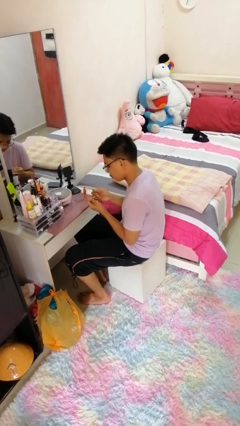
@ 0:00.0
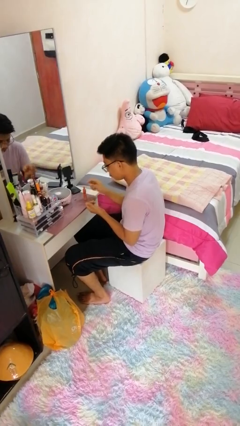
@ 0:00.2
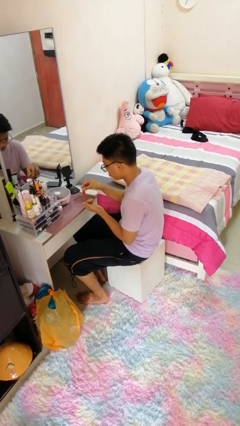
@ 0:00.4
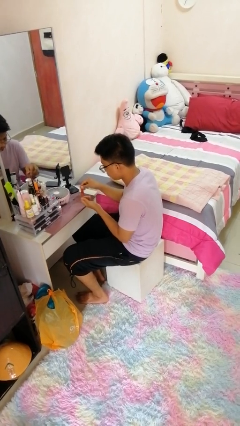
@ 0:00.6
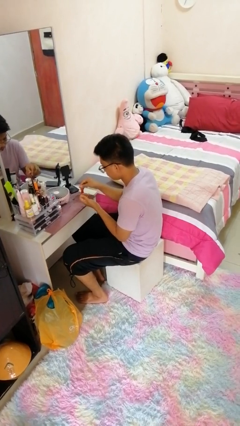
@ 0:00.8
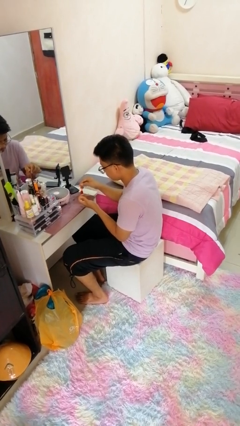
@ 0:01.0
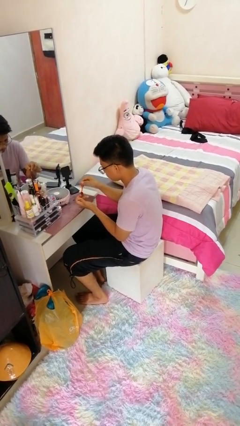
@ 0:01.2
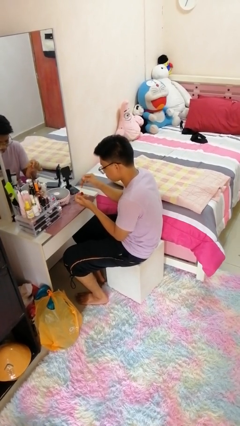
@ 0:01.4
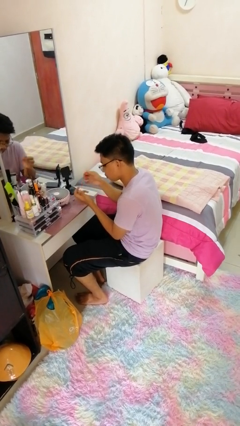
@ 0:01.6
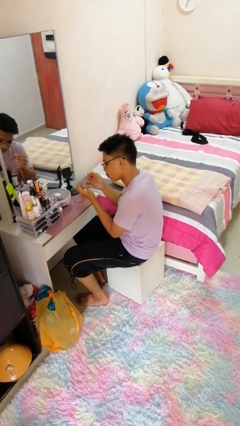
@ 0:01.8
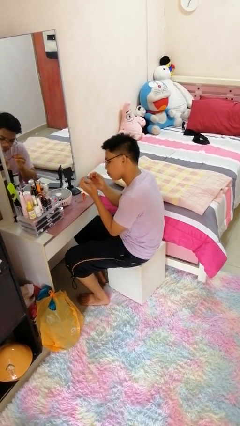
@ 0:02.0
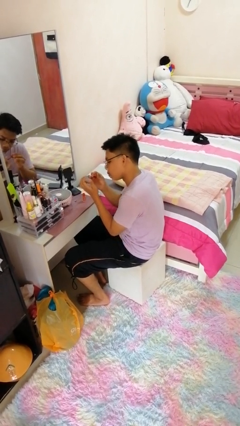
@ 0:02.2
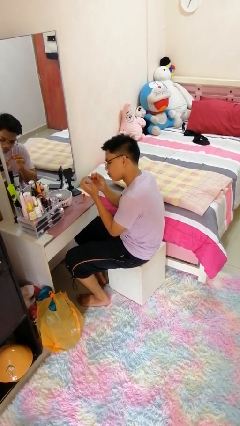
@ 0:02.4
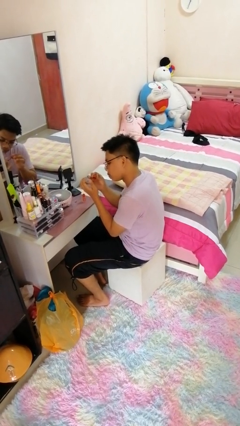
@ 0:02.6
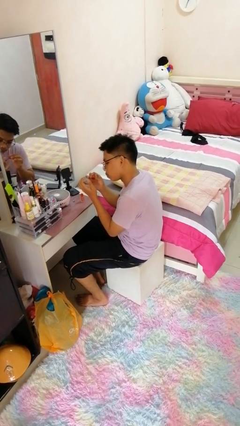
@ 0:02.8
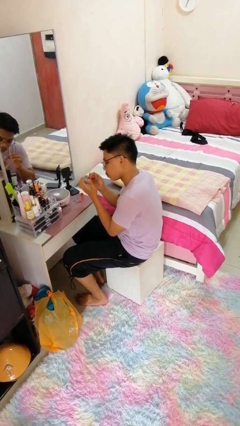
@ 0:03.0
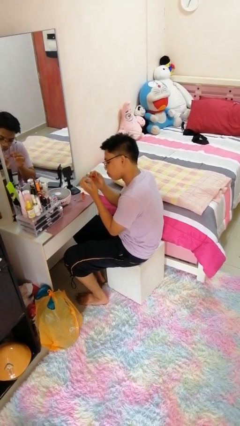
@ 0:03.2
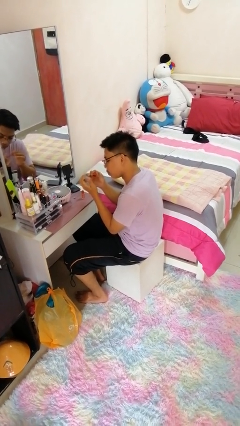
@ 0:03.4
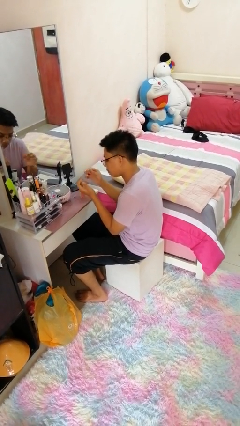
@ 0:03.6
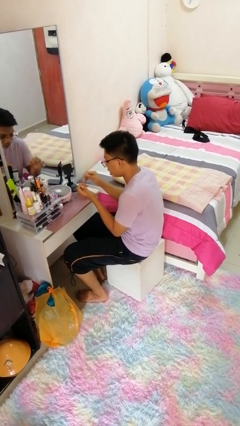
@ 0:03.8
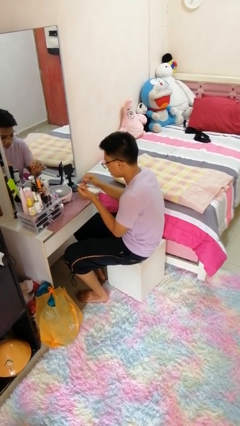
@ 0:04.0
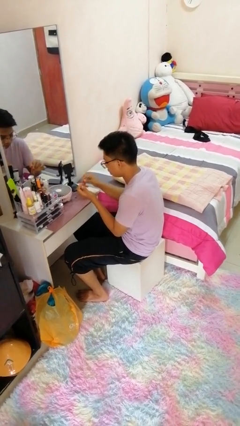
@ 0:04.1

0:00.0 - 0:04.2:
person paints fingernails

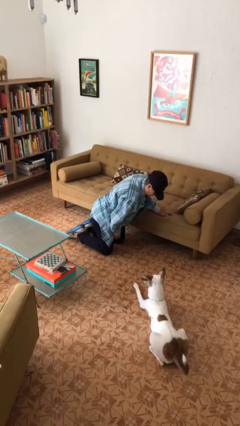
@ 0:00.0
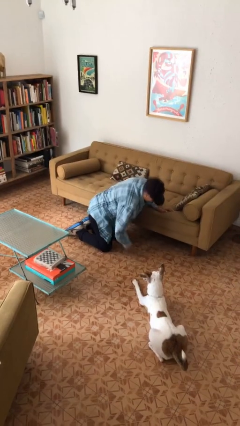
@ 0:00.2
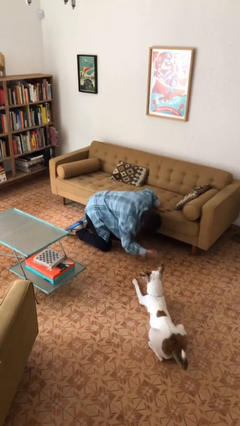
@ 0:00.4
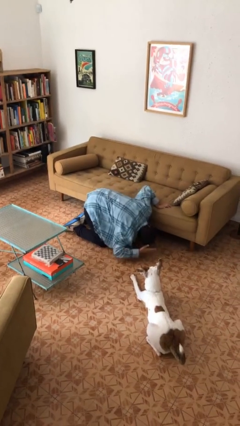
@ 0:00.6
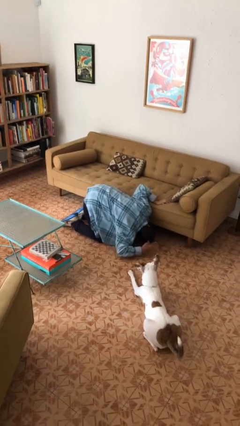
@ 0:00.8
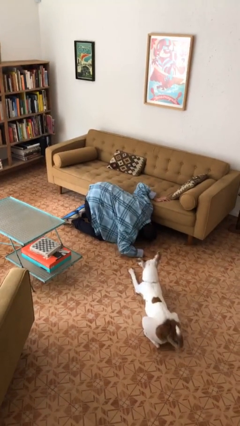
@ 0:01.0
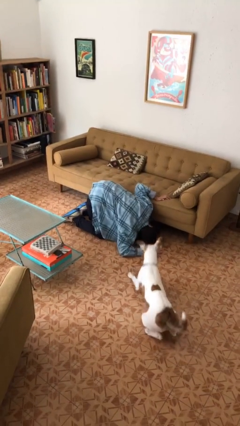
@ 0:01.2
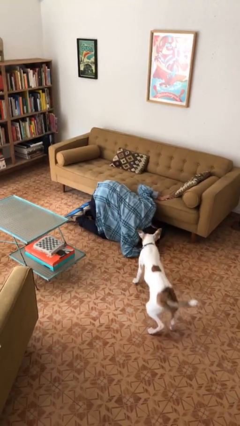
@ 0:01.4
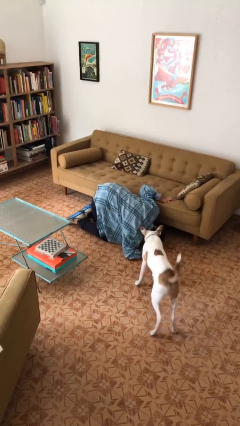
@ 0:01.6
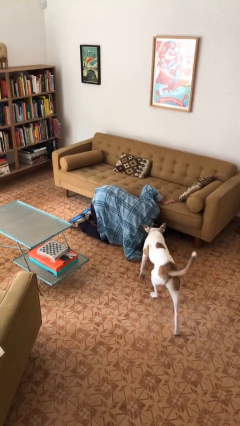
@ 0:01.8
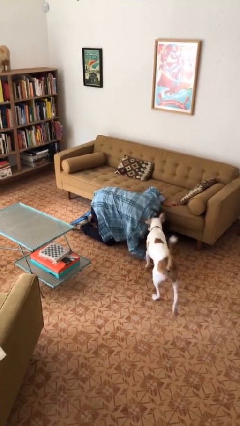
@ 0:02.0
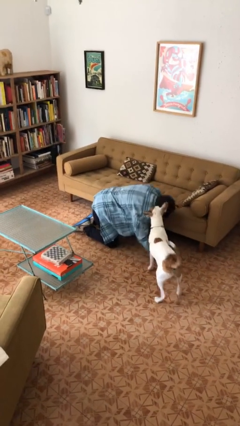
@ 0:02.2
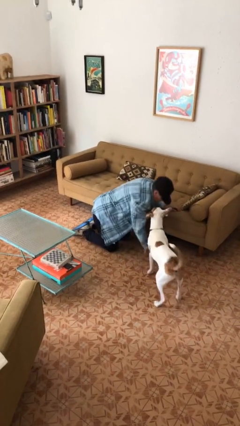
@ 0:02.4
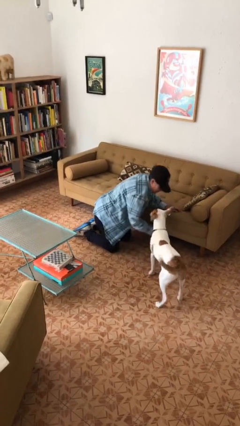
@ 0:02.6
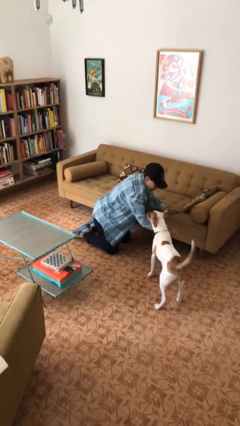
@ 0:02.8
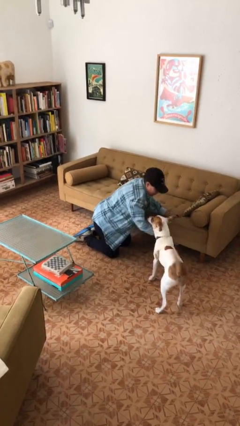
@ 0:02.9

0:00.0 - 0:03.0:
person searches under couch

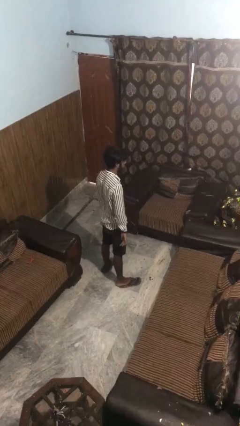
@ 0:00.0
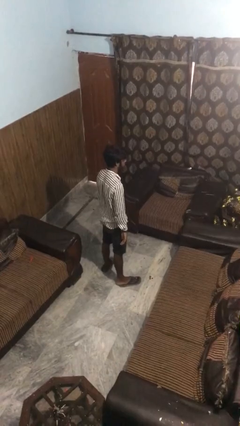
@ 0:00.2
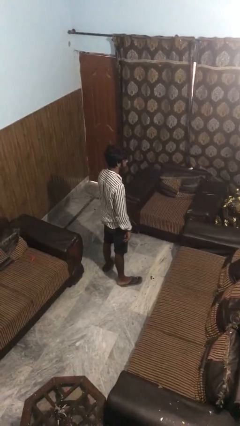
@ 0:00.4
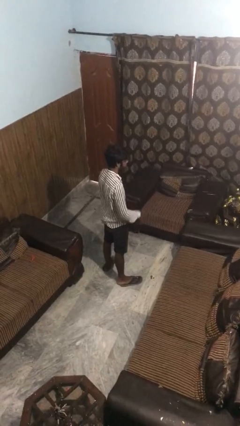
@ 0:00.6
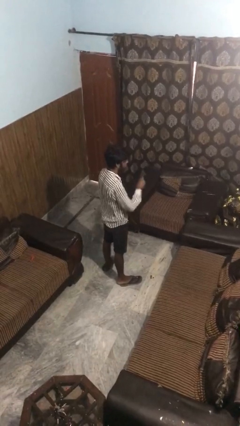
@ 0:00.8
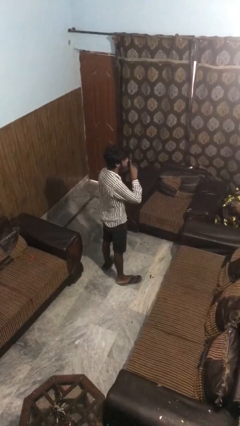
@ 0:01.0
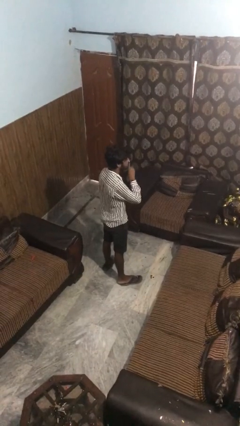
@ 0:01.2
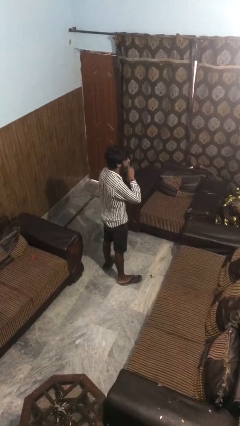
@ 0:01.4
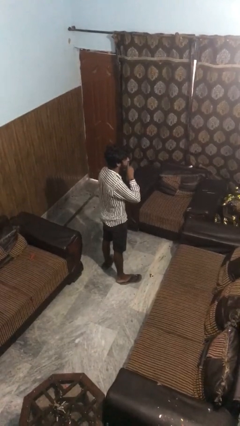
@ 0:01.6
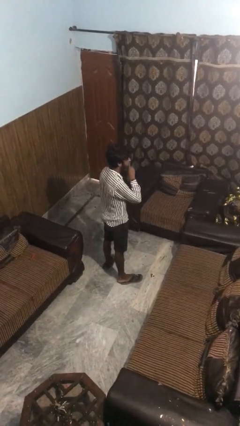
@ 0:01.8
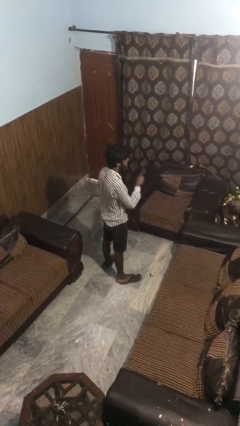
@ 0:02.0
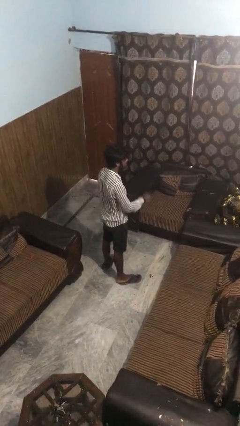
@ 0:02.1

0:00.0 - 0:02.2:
person gestures be quiet

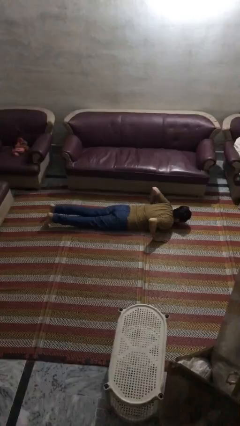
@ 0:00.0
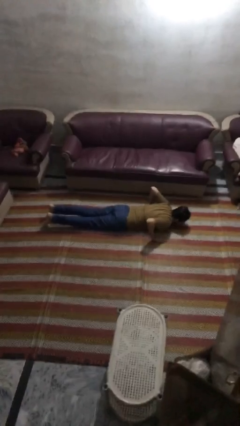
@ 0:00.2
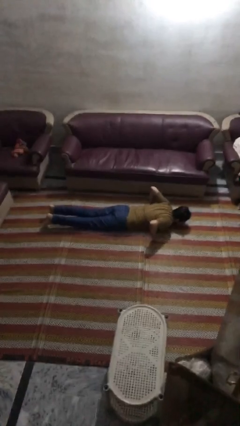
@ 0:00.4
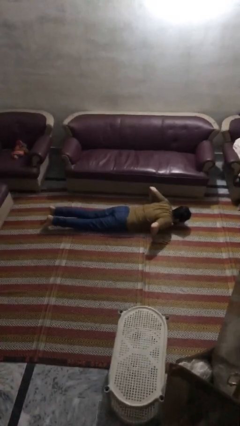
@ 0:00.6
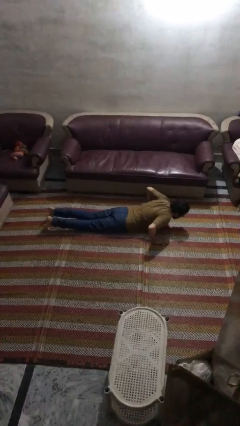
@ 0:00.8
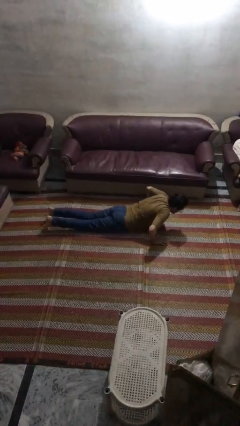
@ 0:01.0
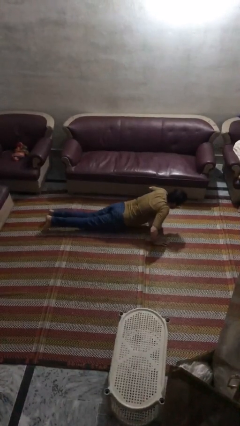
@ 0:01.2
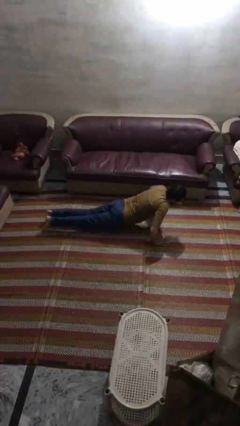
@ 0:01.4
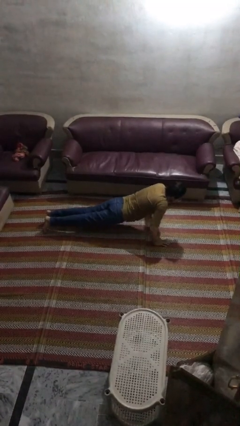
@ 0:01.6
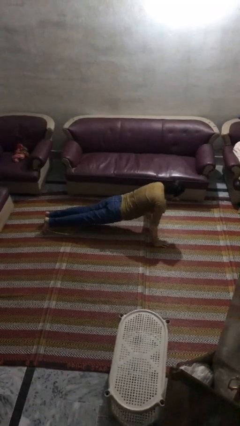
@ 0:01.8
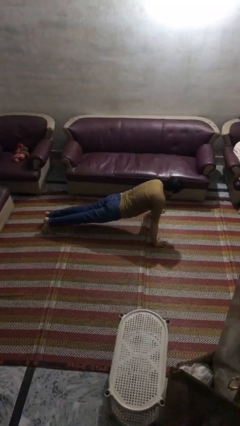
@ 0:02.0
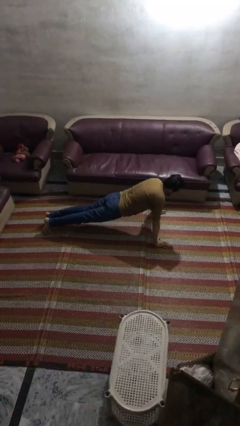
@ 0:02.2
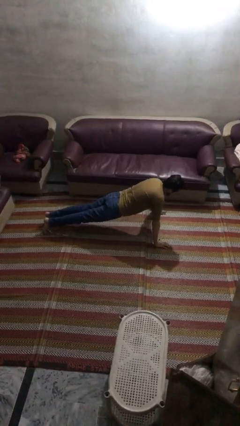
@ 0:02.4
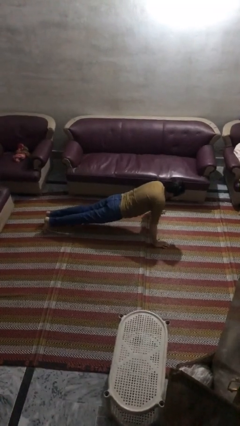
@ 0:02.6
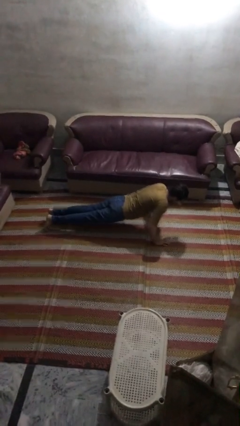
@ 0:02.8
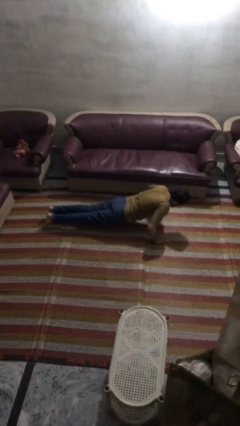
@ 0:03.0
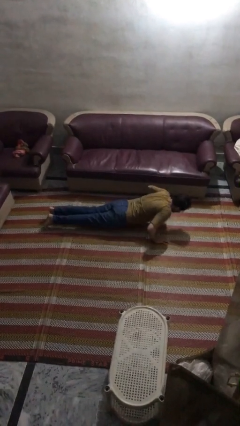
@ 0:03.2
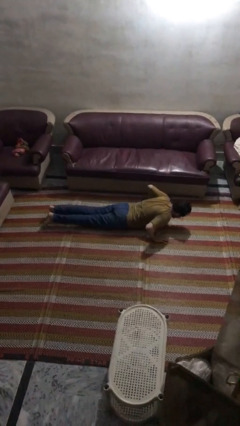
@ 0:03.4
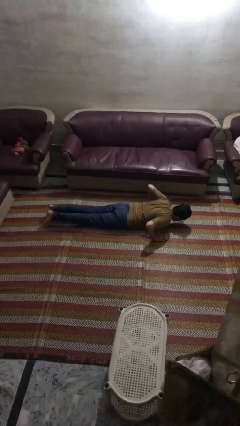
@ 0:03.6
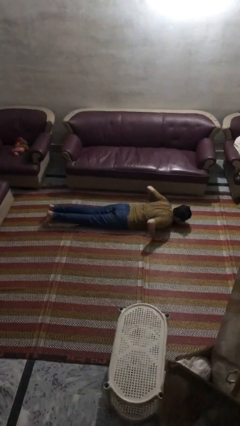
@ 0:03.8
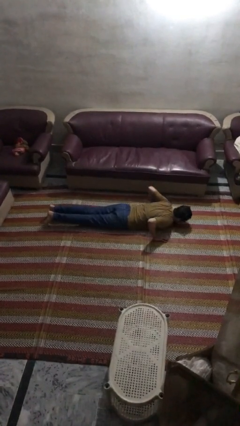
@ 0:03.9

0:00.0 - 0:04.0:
person exercises with pushup

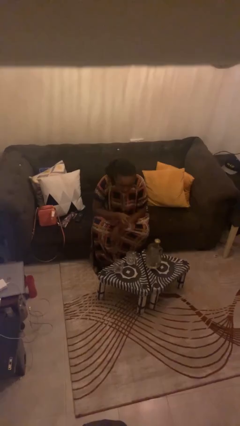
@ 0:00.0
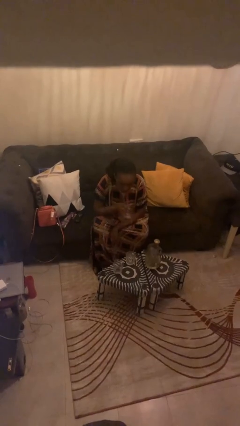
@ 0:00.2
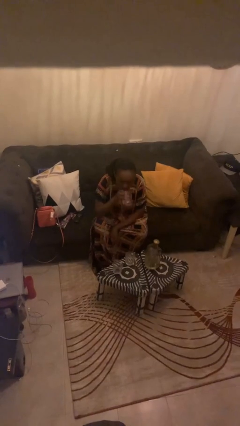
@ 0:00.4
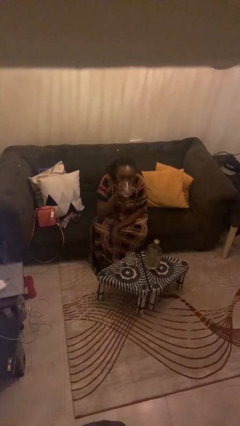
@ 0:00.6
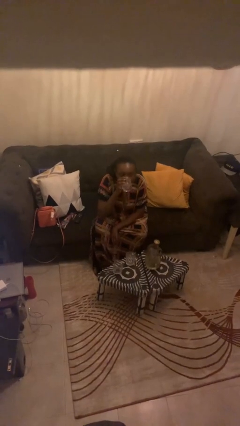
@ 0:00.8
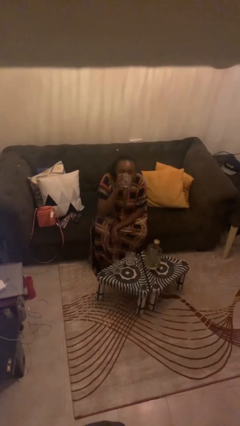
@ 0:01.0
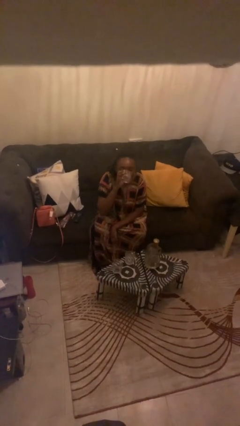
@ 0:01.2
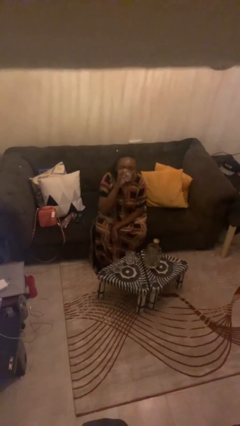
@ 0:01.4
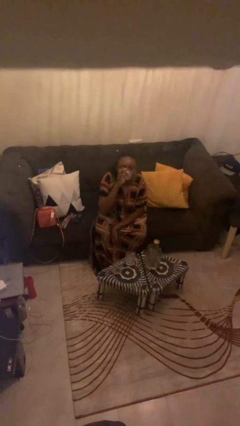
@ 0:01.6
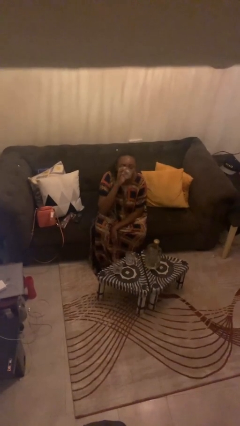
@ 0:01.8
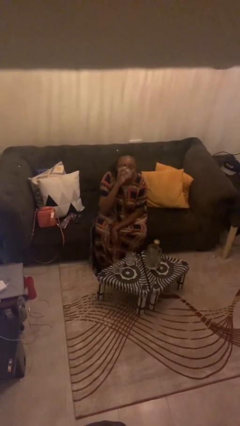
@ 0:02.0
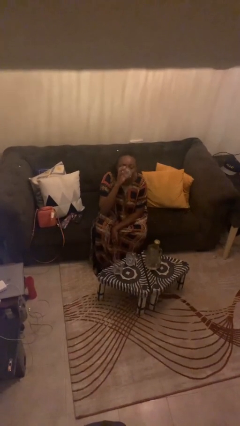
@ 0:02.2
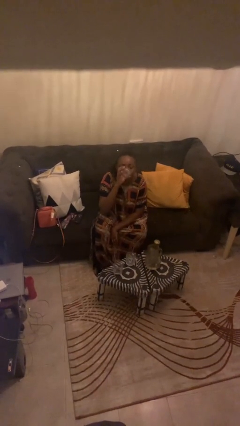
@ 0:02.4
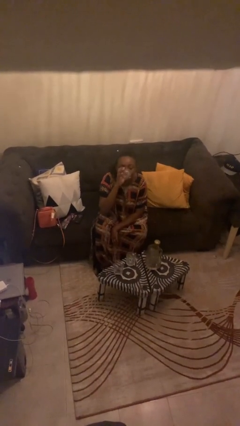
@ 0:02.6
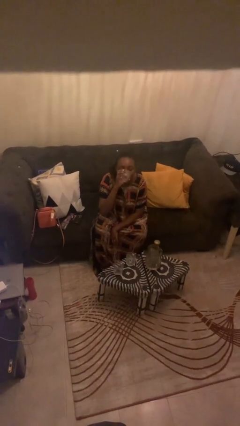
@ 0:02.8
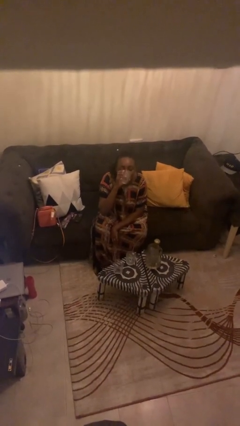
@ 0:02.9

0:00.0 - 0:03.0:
person drinks from shotglass

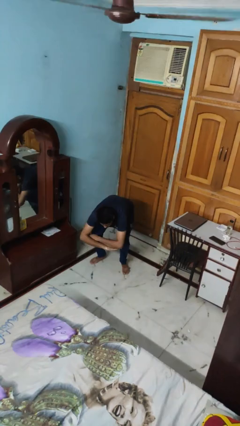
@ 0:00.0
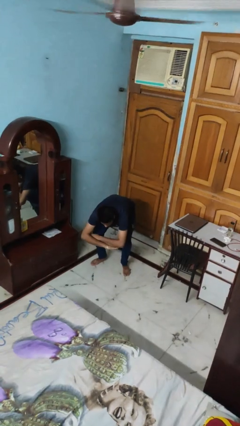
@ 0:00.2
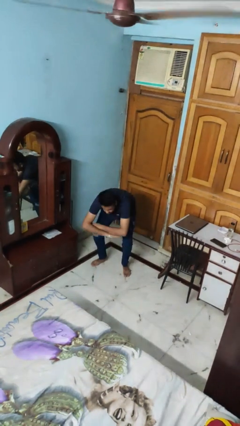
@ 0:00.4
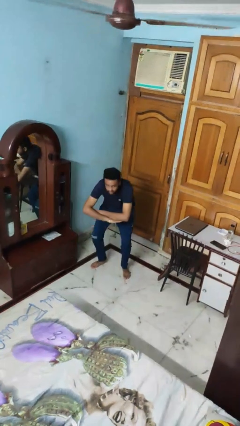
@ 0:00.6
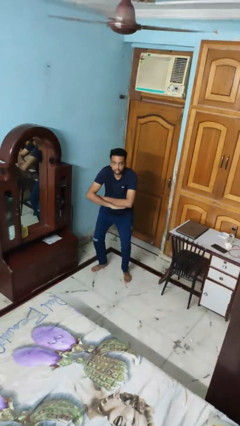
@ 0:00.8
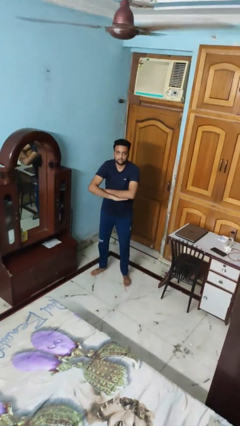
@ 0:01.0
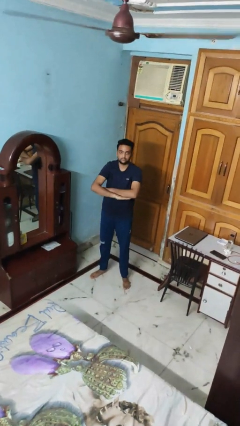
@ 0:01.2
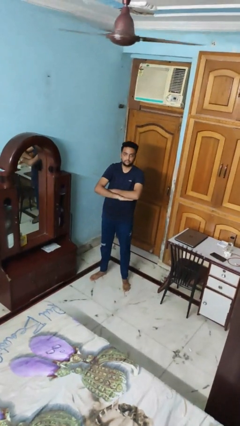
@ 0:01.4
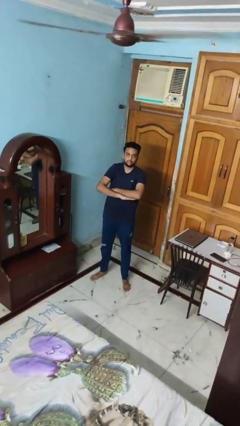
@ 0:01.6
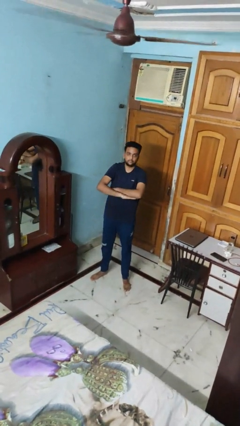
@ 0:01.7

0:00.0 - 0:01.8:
person stands up
